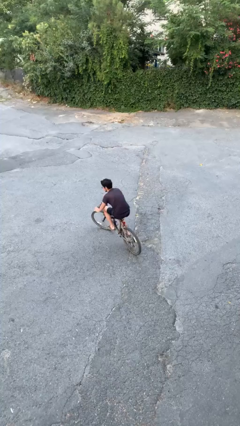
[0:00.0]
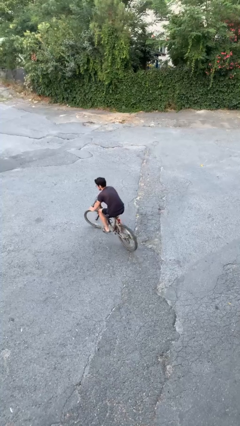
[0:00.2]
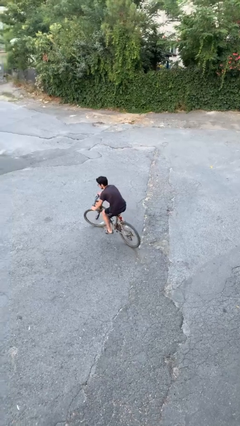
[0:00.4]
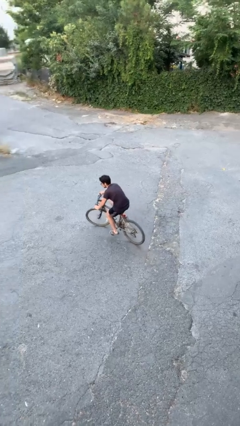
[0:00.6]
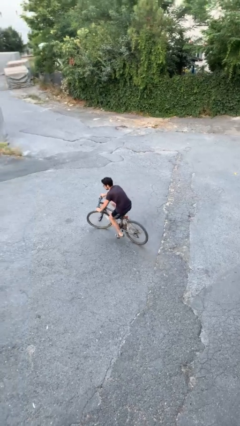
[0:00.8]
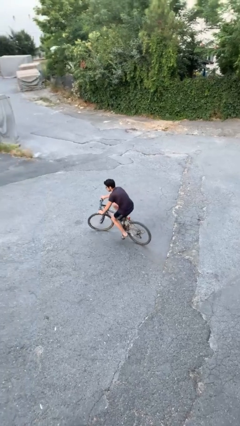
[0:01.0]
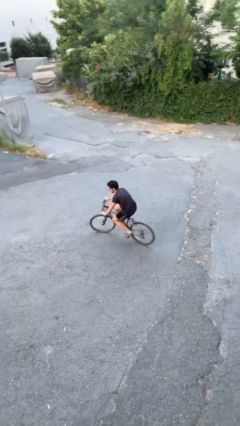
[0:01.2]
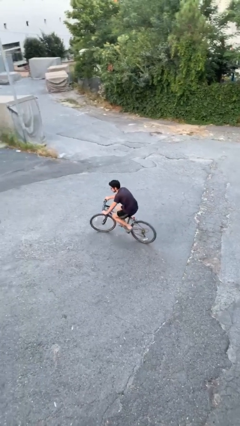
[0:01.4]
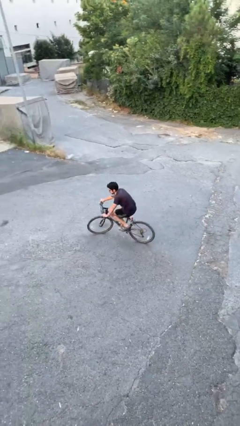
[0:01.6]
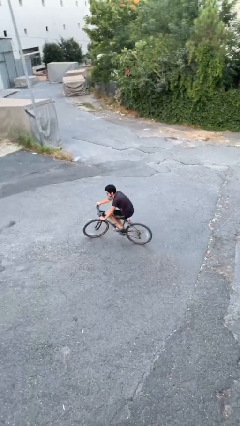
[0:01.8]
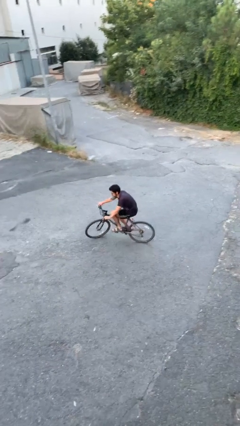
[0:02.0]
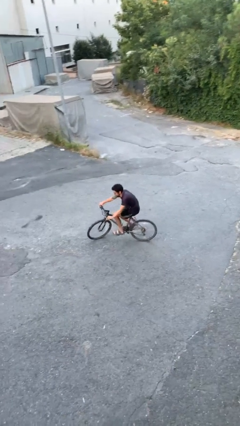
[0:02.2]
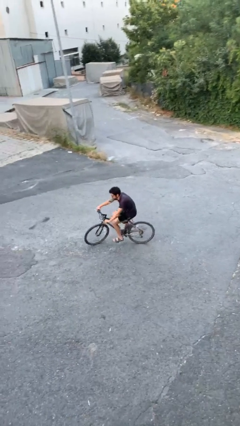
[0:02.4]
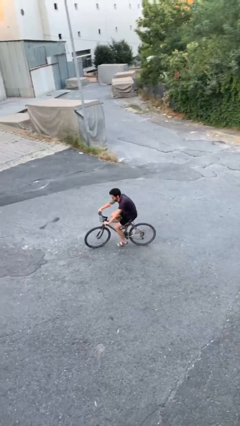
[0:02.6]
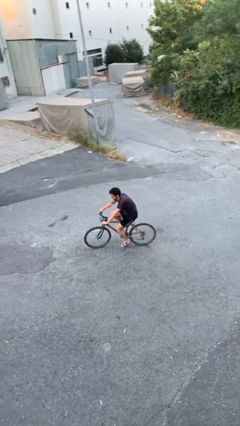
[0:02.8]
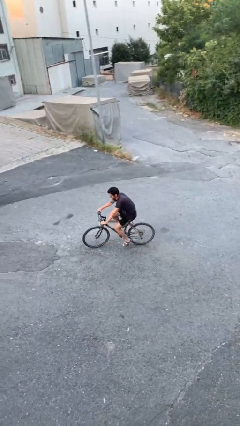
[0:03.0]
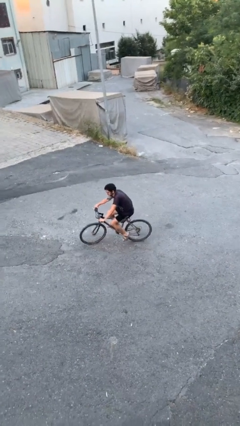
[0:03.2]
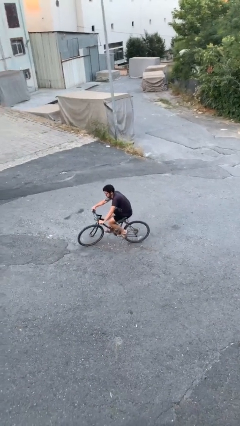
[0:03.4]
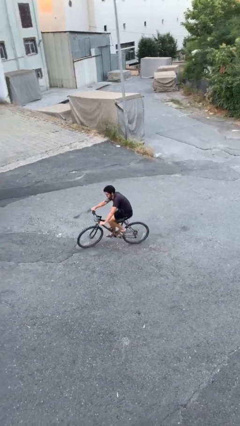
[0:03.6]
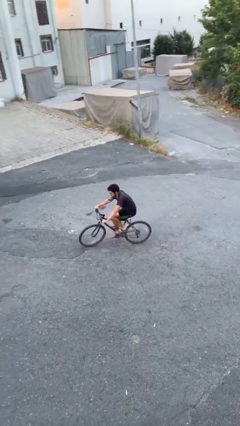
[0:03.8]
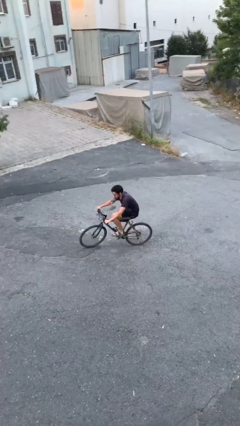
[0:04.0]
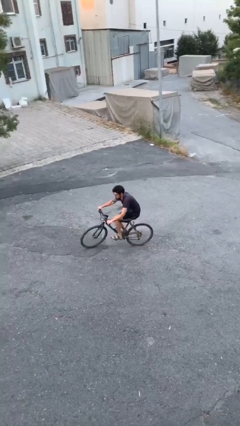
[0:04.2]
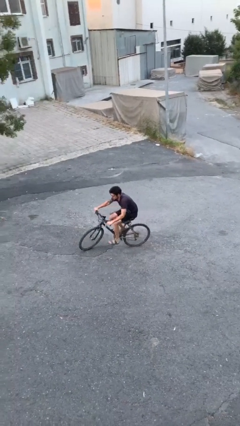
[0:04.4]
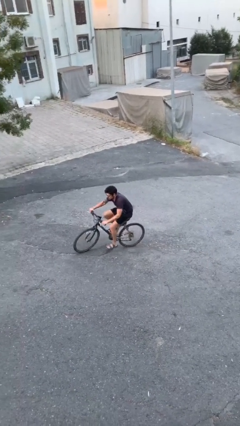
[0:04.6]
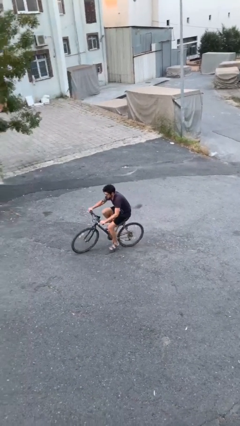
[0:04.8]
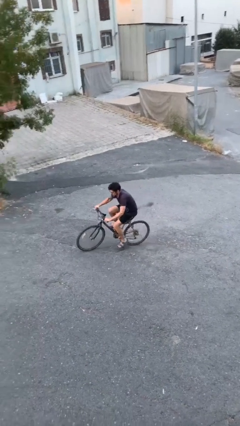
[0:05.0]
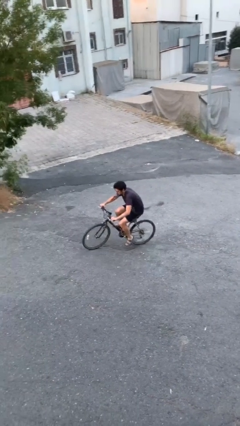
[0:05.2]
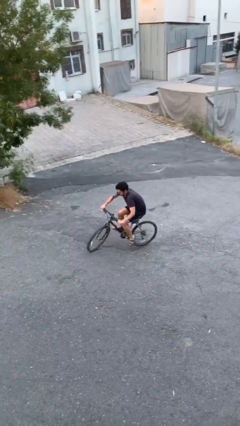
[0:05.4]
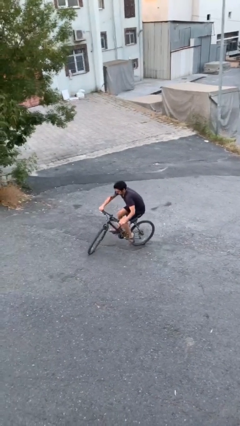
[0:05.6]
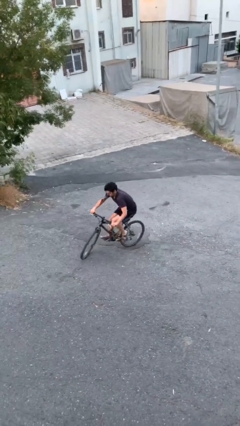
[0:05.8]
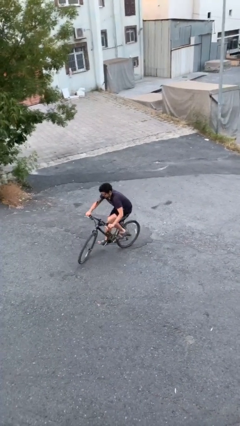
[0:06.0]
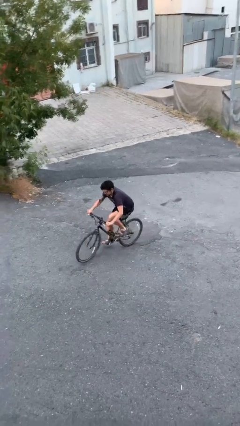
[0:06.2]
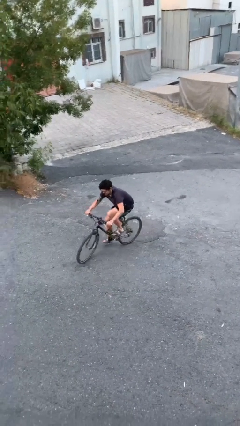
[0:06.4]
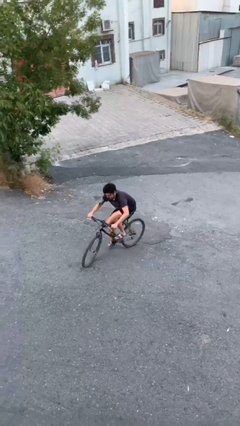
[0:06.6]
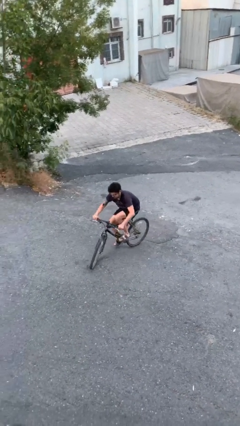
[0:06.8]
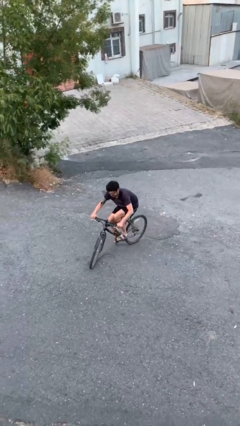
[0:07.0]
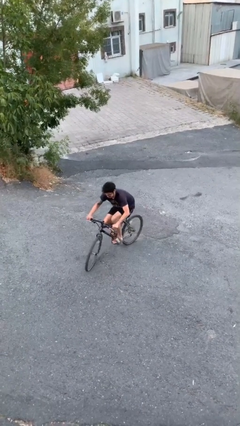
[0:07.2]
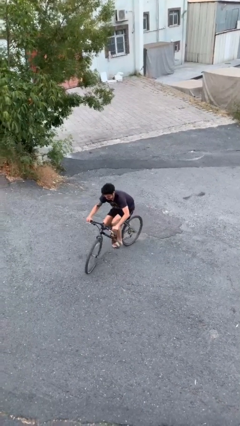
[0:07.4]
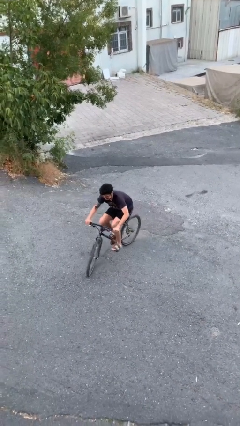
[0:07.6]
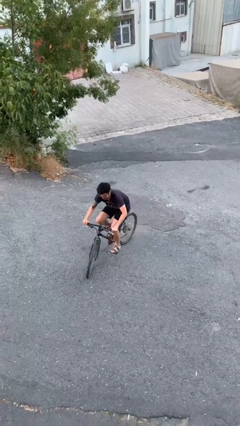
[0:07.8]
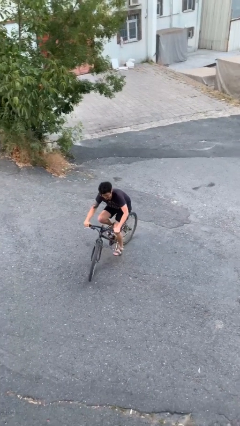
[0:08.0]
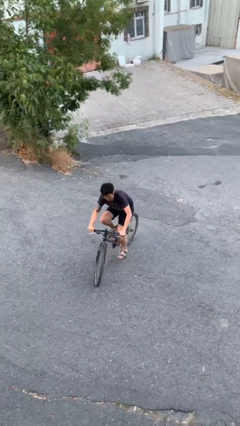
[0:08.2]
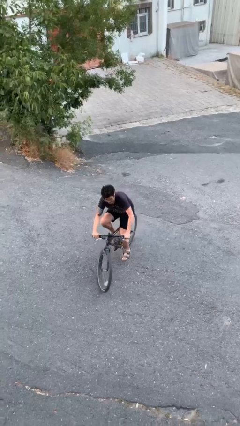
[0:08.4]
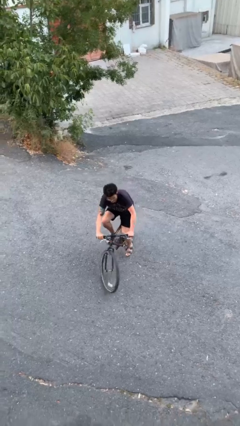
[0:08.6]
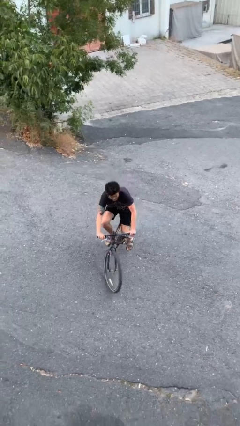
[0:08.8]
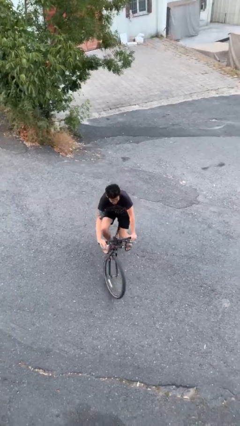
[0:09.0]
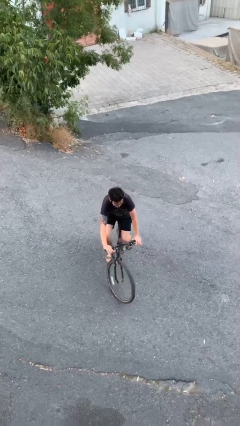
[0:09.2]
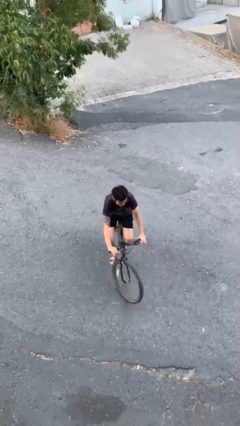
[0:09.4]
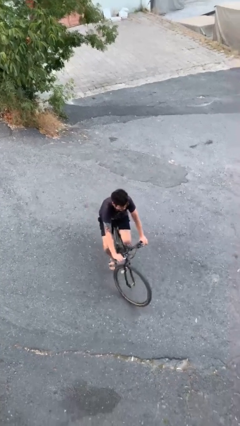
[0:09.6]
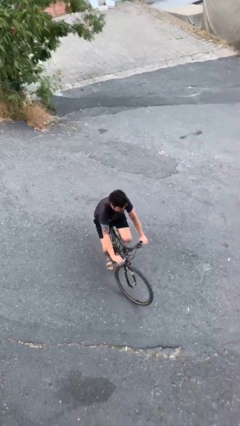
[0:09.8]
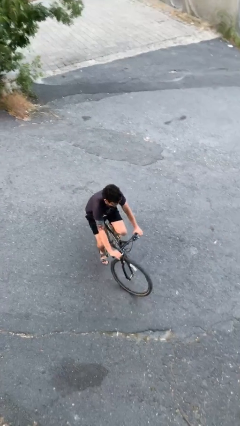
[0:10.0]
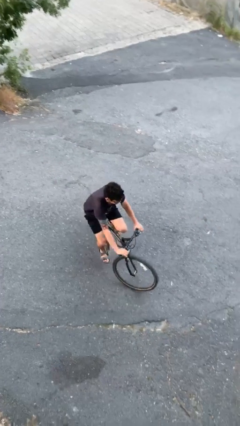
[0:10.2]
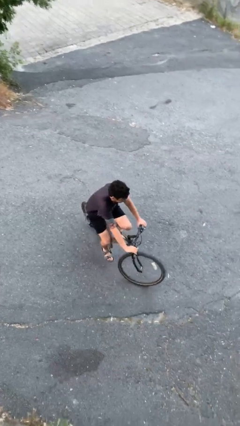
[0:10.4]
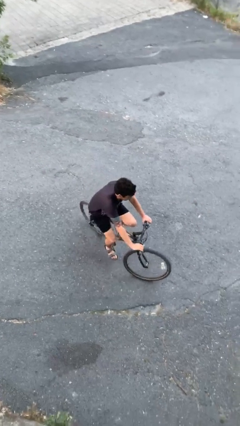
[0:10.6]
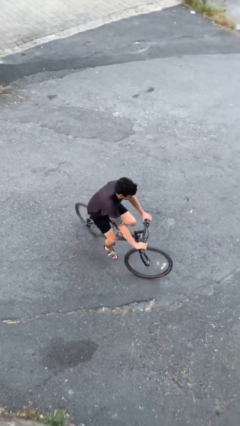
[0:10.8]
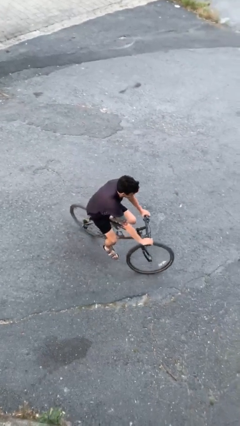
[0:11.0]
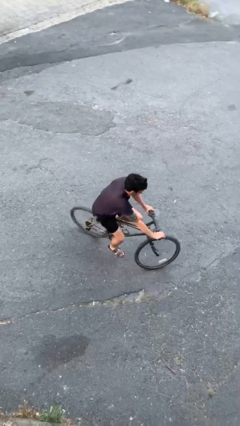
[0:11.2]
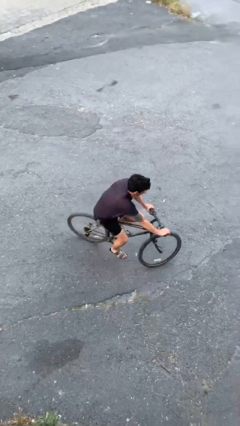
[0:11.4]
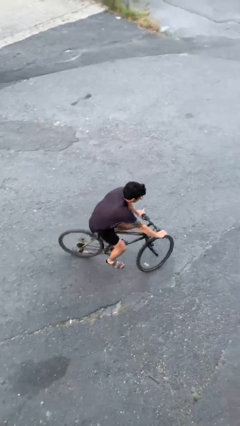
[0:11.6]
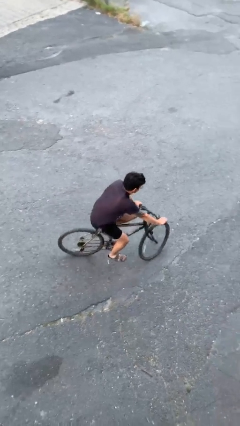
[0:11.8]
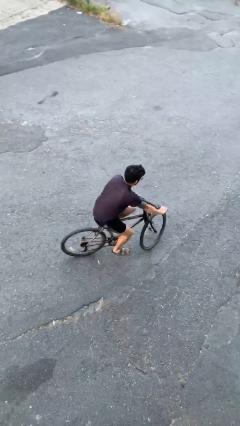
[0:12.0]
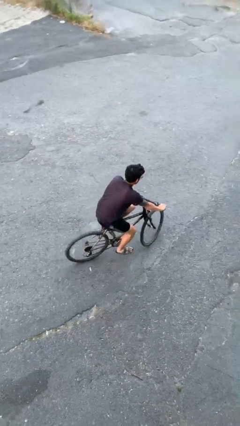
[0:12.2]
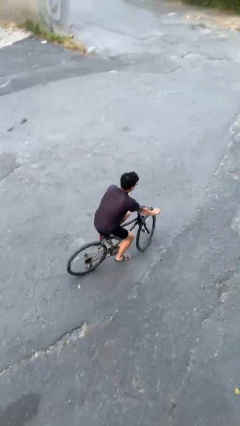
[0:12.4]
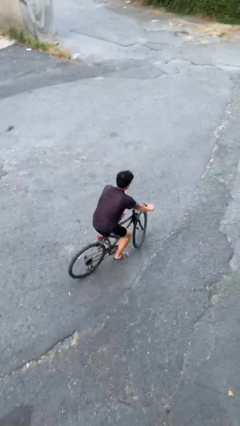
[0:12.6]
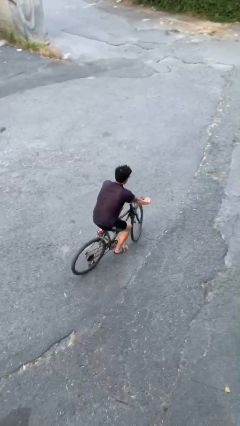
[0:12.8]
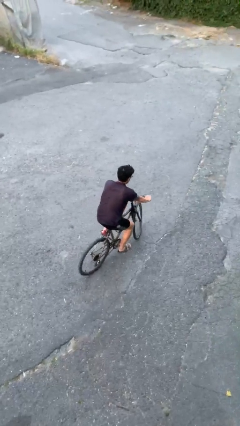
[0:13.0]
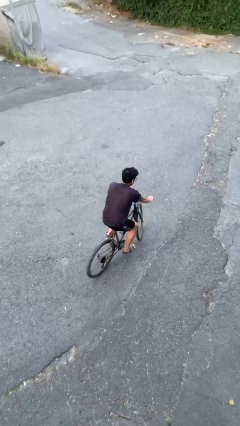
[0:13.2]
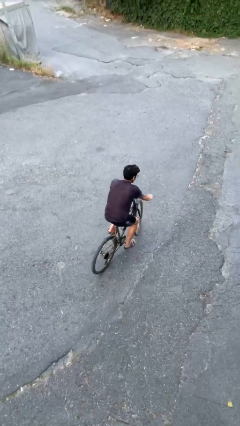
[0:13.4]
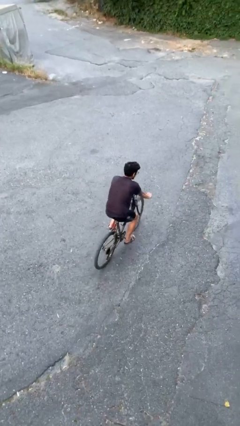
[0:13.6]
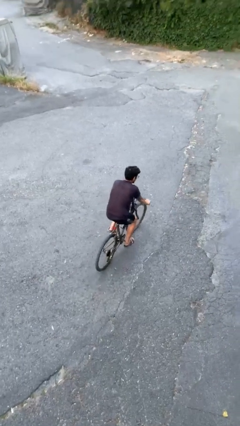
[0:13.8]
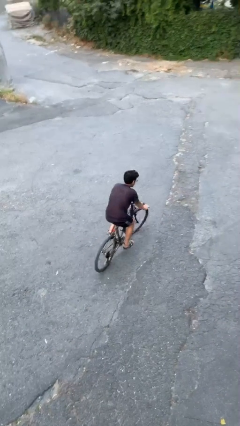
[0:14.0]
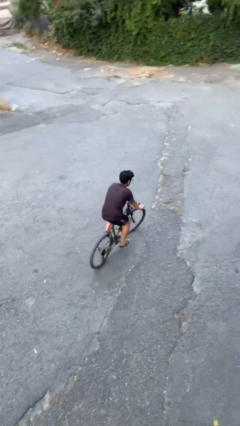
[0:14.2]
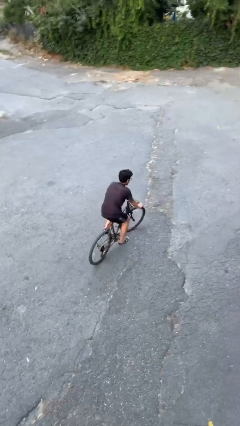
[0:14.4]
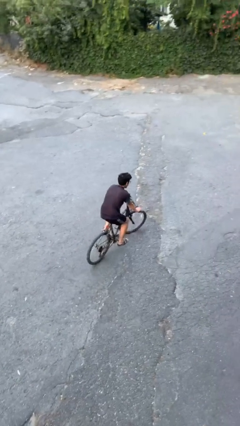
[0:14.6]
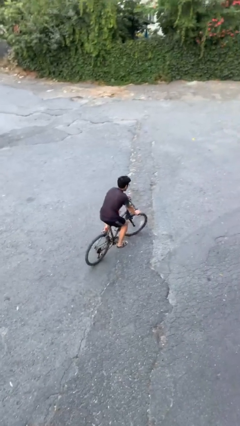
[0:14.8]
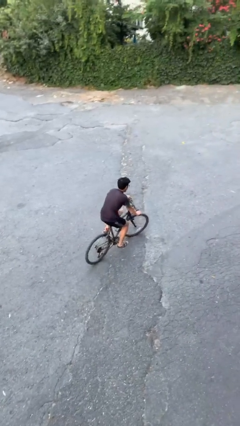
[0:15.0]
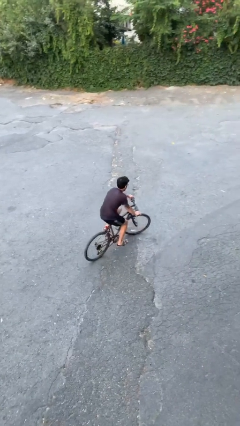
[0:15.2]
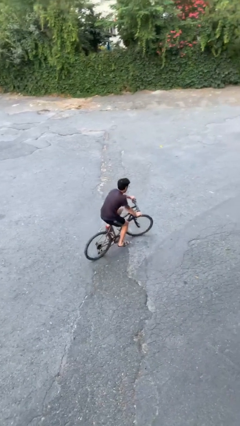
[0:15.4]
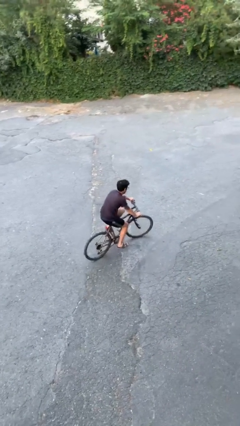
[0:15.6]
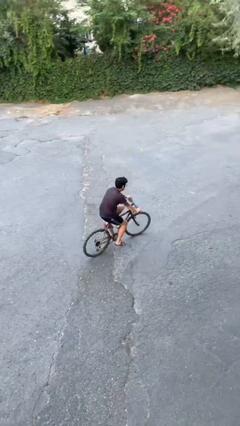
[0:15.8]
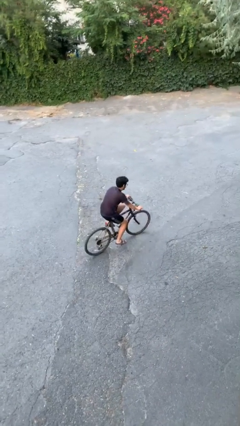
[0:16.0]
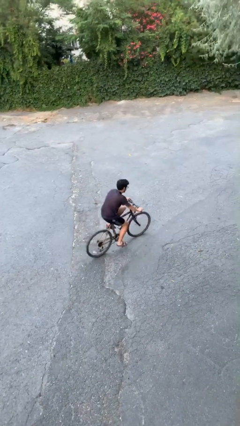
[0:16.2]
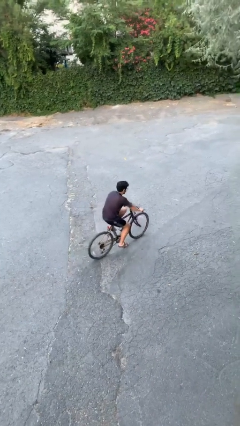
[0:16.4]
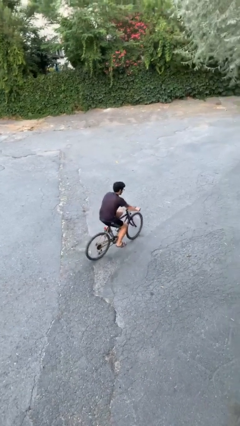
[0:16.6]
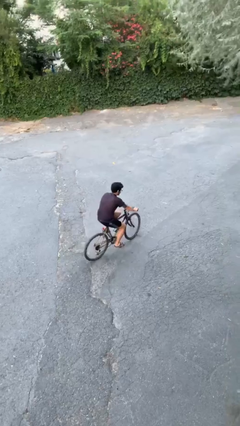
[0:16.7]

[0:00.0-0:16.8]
person rides bicycle

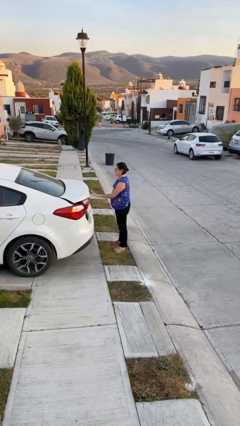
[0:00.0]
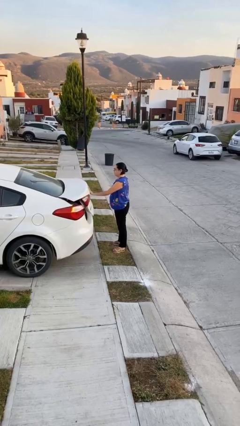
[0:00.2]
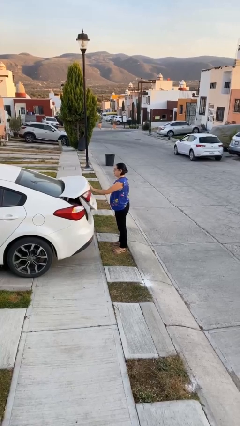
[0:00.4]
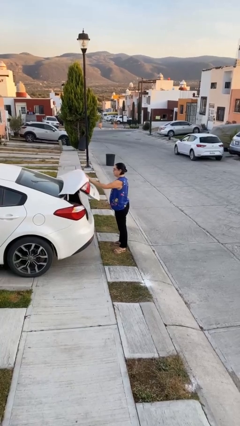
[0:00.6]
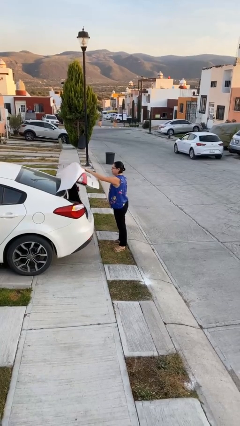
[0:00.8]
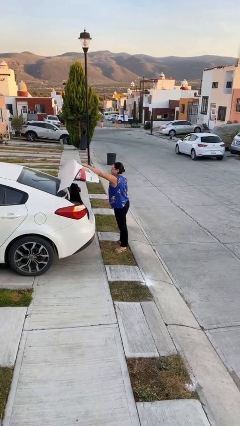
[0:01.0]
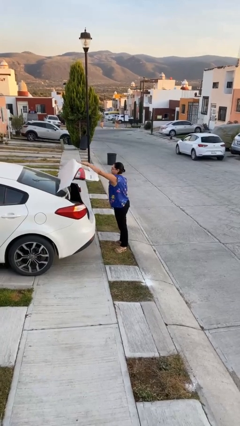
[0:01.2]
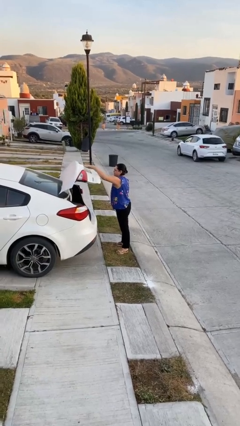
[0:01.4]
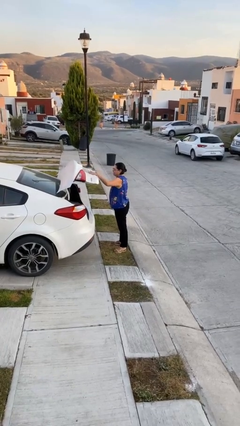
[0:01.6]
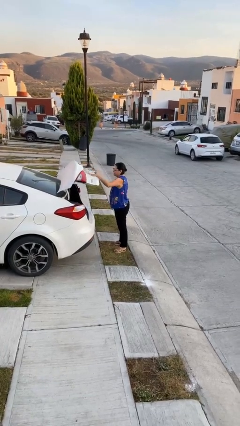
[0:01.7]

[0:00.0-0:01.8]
person opens car trunk
